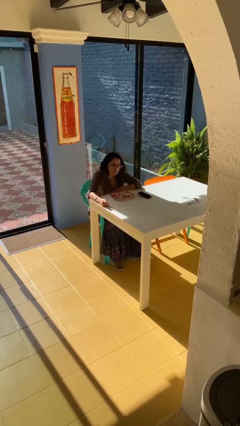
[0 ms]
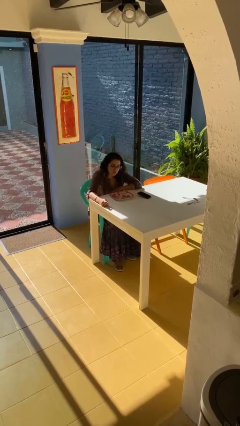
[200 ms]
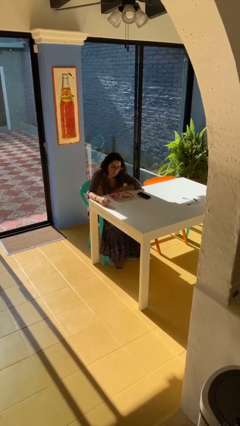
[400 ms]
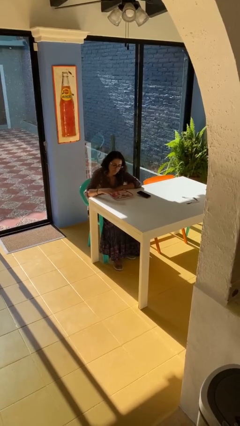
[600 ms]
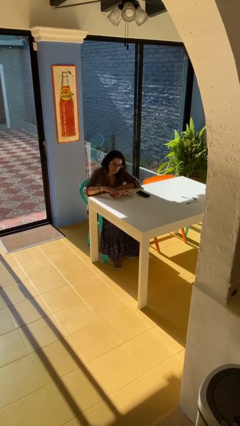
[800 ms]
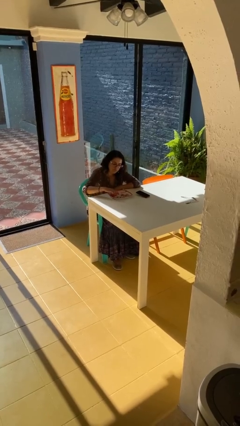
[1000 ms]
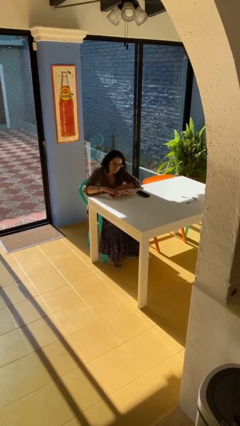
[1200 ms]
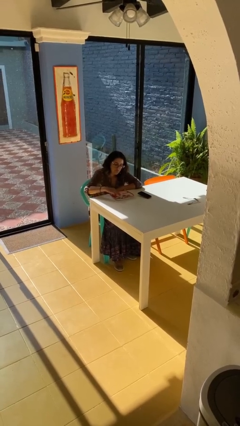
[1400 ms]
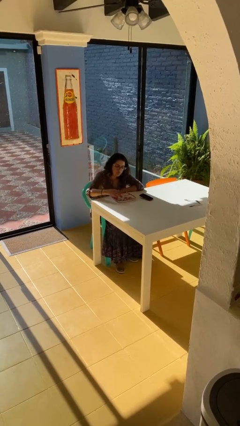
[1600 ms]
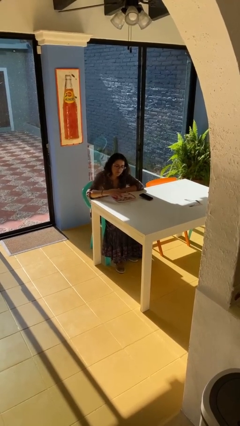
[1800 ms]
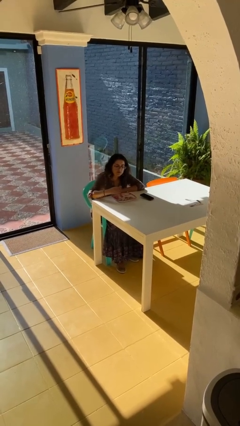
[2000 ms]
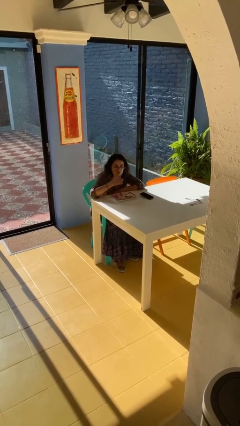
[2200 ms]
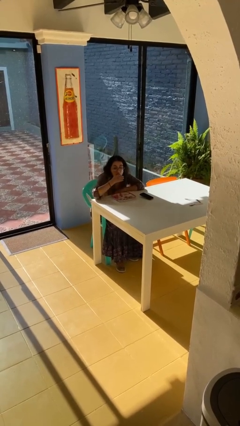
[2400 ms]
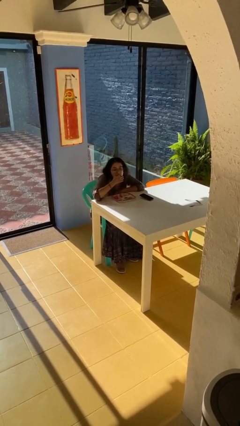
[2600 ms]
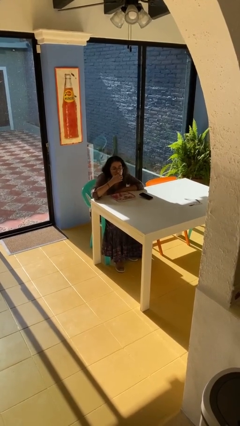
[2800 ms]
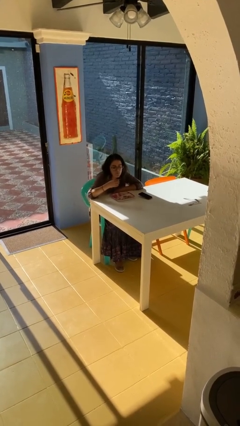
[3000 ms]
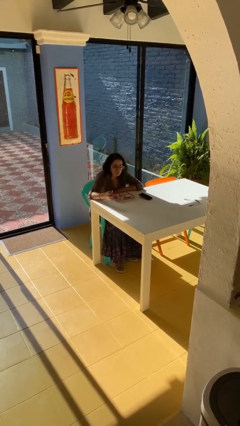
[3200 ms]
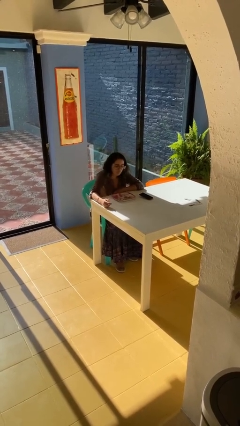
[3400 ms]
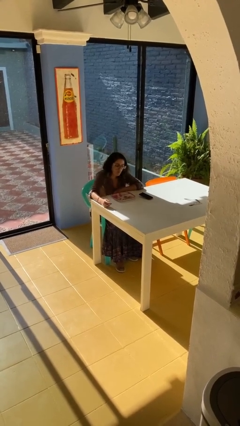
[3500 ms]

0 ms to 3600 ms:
person eats with hands

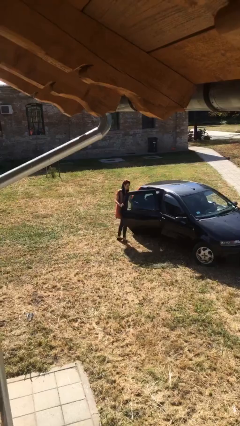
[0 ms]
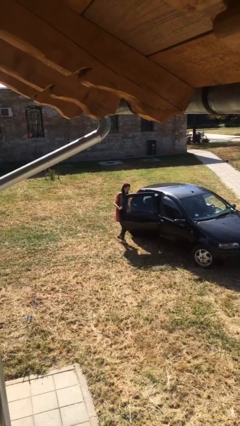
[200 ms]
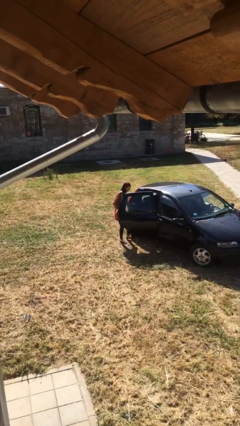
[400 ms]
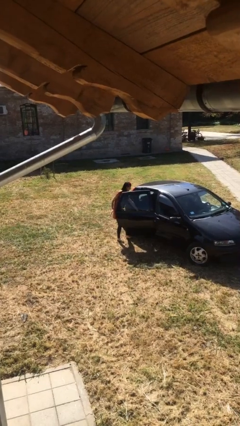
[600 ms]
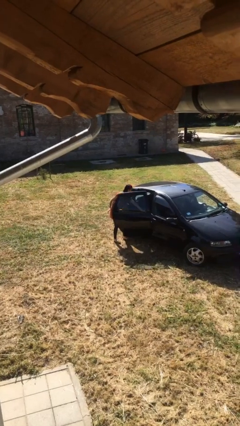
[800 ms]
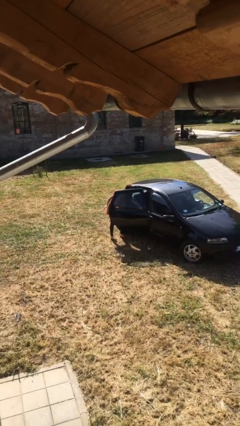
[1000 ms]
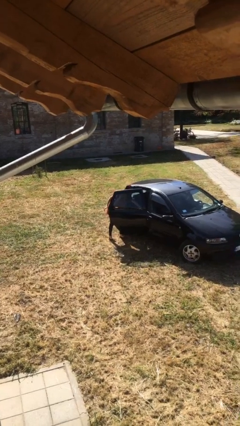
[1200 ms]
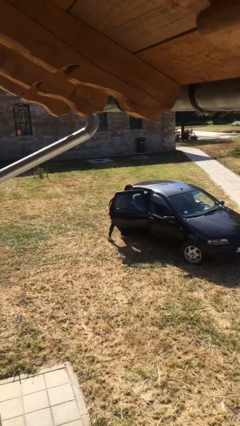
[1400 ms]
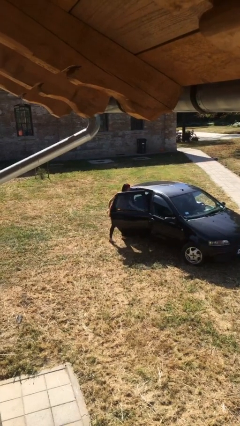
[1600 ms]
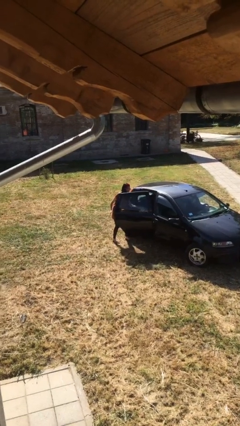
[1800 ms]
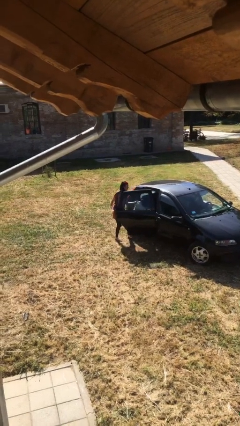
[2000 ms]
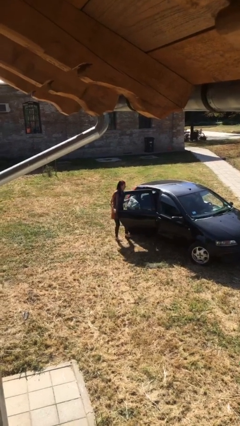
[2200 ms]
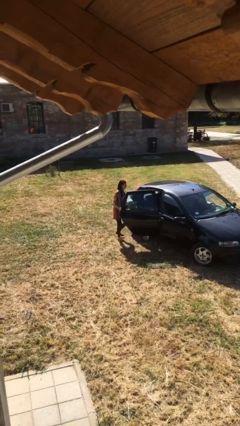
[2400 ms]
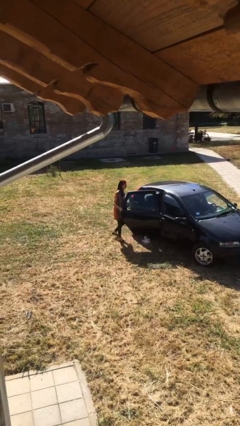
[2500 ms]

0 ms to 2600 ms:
person unloads car

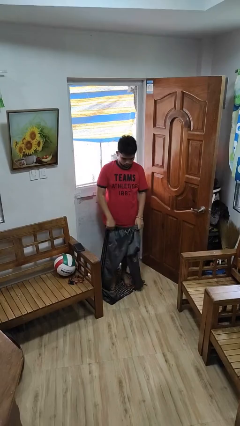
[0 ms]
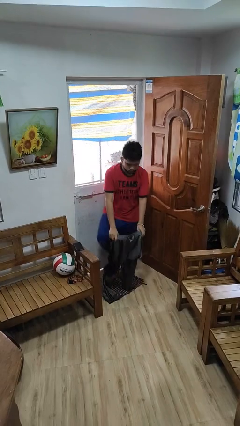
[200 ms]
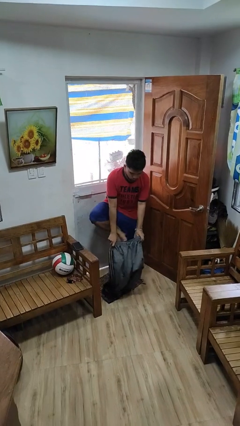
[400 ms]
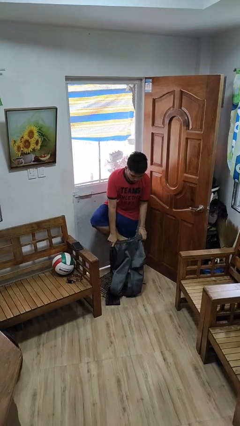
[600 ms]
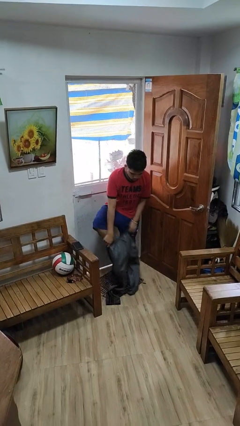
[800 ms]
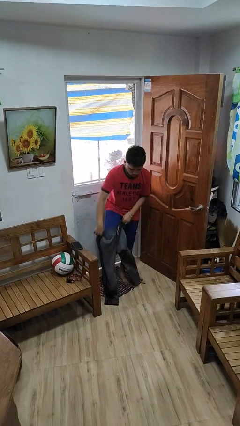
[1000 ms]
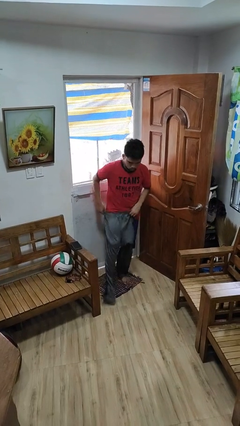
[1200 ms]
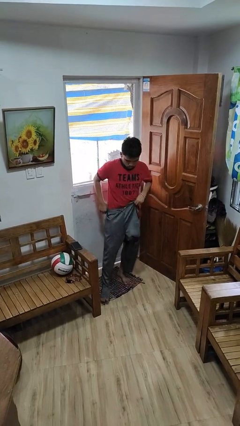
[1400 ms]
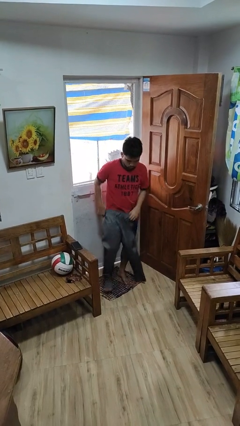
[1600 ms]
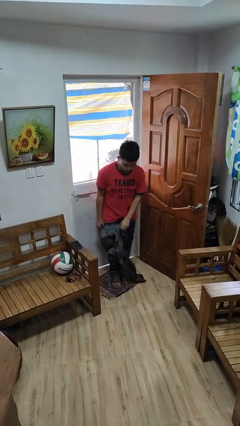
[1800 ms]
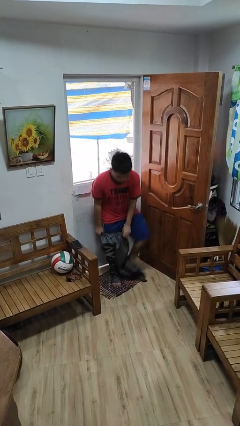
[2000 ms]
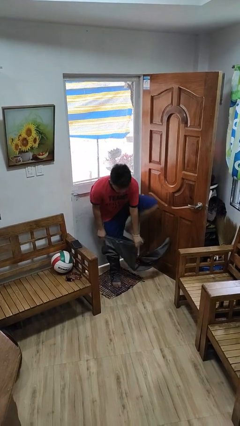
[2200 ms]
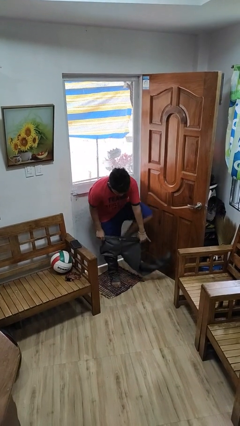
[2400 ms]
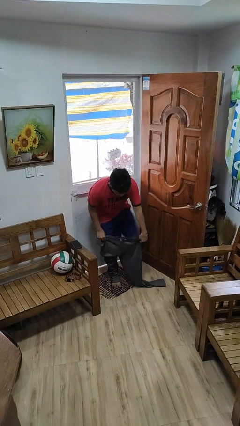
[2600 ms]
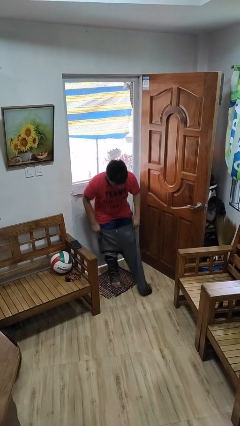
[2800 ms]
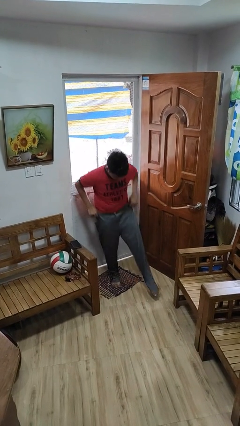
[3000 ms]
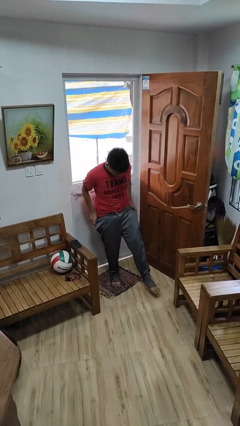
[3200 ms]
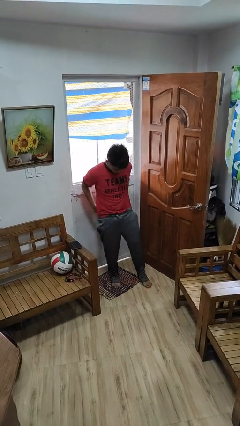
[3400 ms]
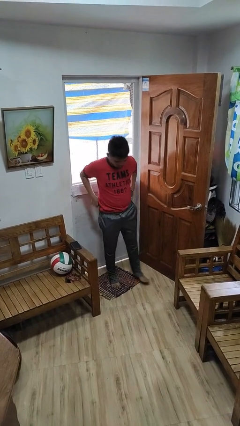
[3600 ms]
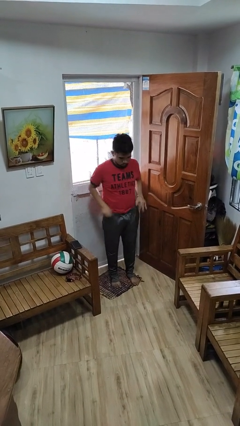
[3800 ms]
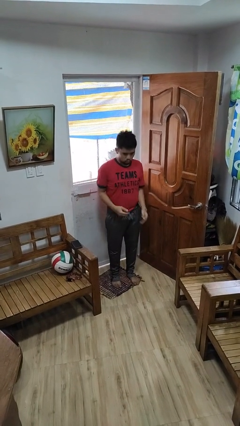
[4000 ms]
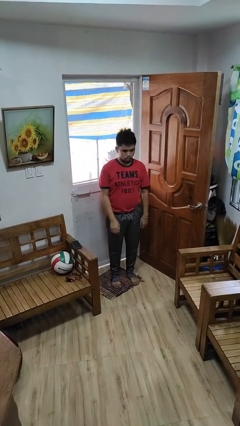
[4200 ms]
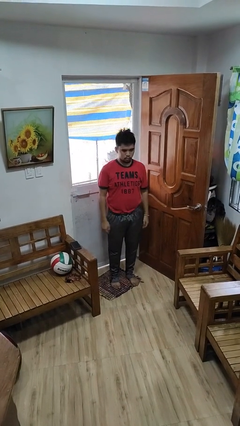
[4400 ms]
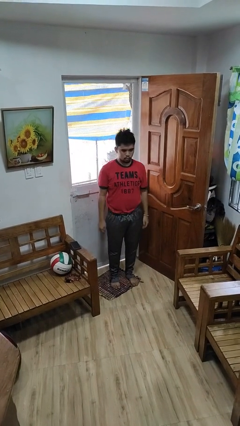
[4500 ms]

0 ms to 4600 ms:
person puts on pants

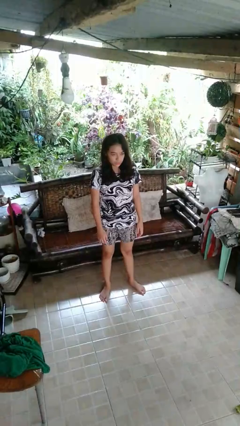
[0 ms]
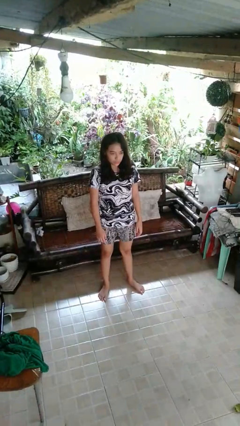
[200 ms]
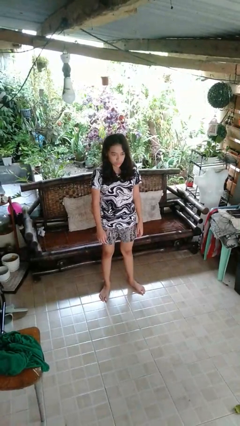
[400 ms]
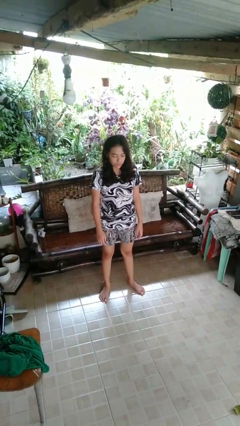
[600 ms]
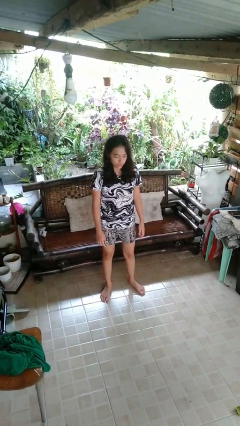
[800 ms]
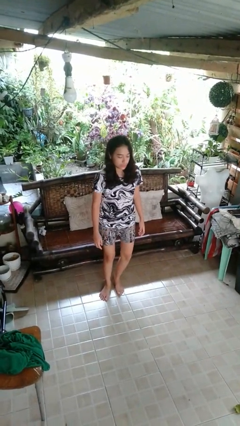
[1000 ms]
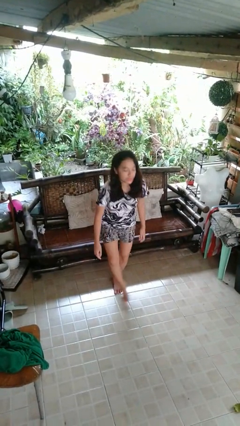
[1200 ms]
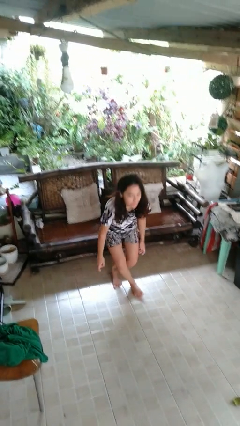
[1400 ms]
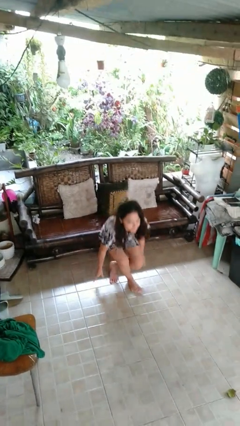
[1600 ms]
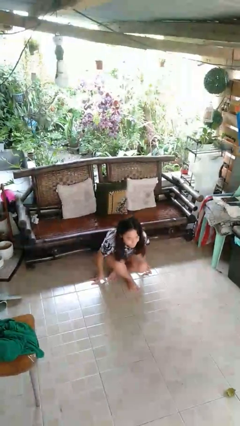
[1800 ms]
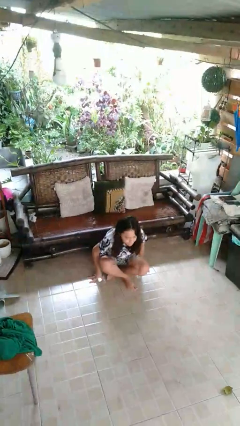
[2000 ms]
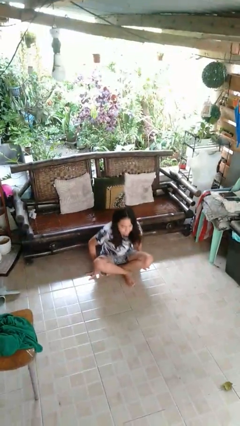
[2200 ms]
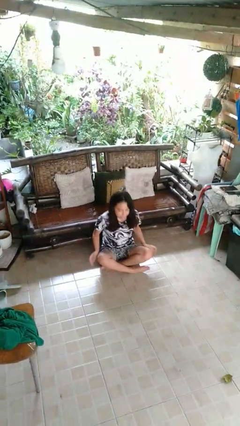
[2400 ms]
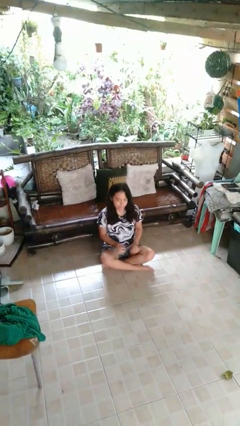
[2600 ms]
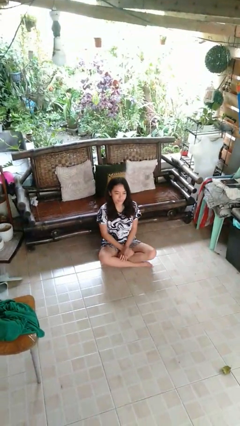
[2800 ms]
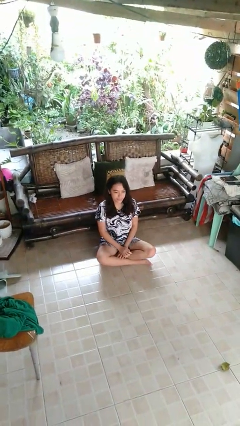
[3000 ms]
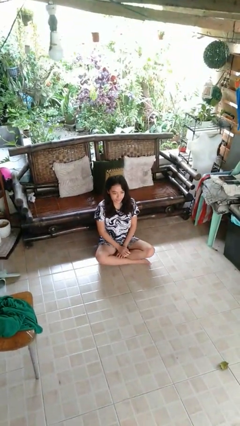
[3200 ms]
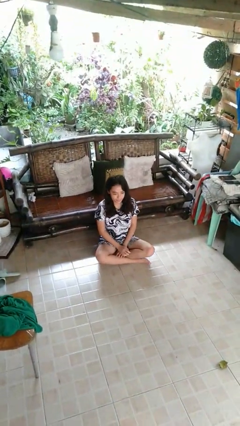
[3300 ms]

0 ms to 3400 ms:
person sits crisscross

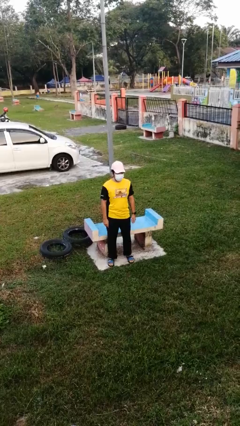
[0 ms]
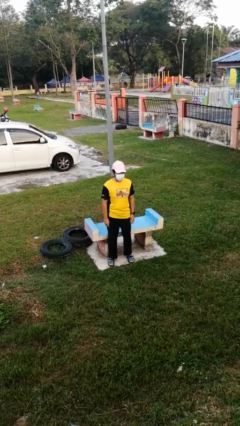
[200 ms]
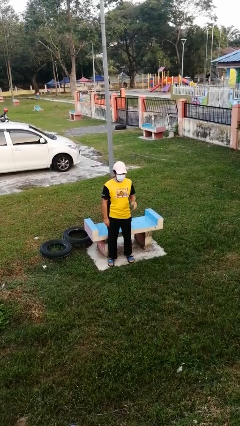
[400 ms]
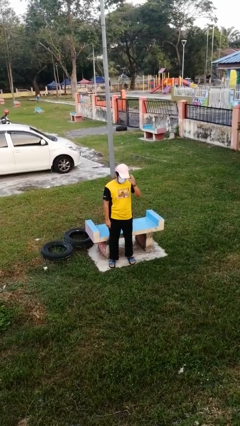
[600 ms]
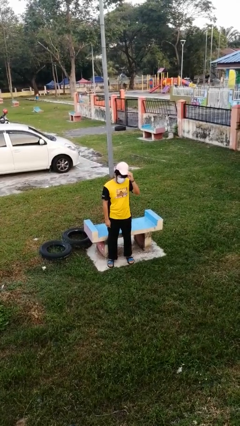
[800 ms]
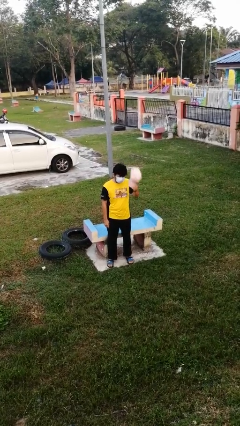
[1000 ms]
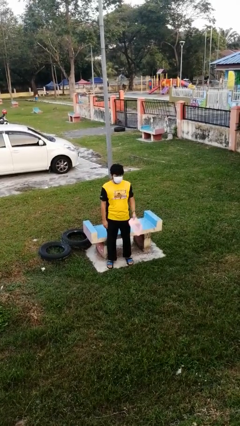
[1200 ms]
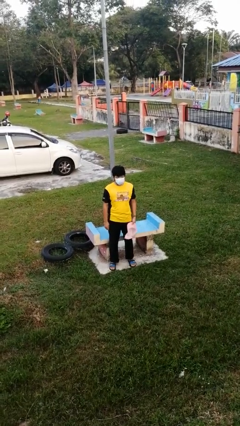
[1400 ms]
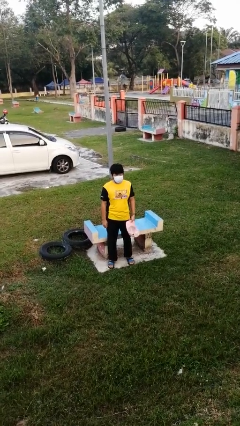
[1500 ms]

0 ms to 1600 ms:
person takes off hat

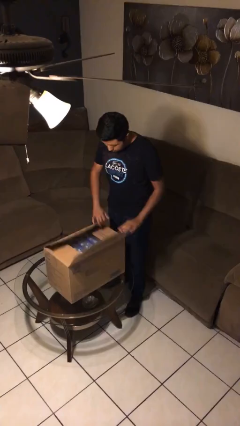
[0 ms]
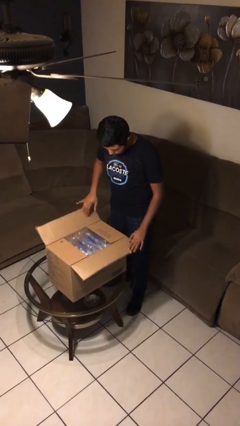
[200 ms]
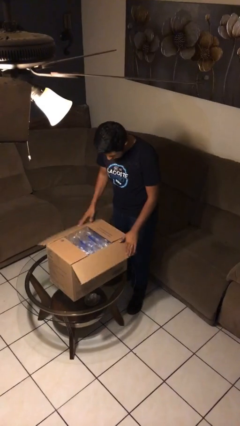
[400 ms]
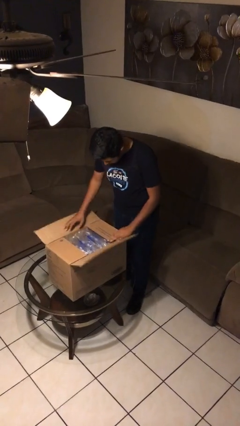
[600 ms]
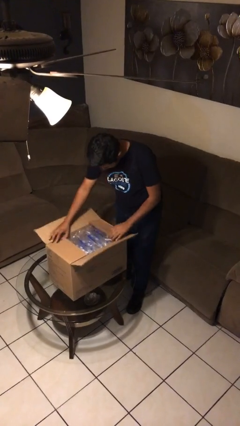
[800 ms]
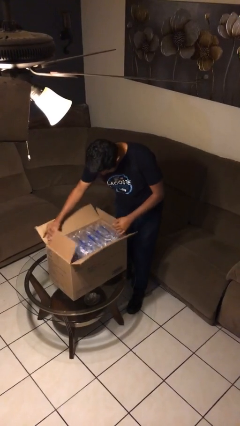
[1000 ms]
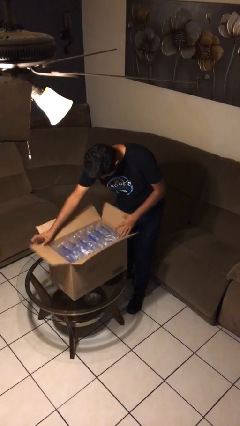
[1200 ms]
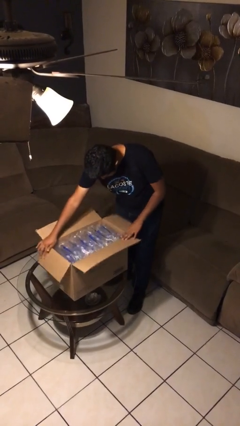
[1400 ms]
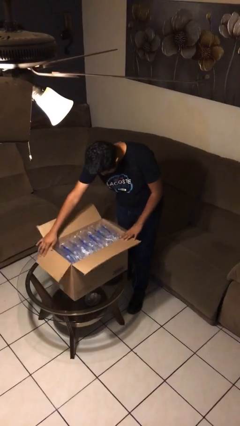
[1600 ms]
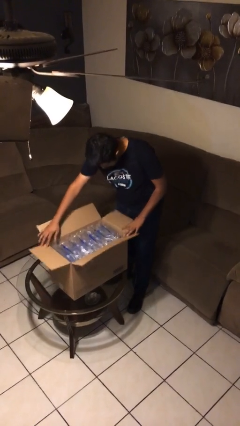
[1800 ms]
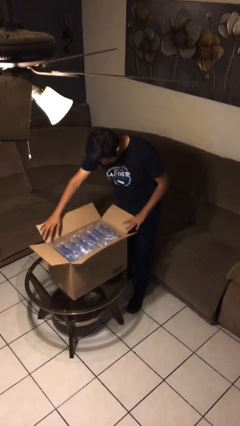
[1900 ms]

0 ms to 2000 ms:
person opens box
